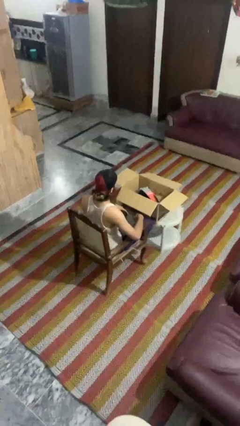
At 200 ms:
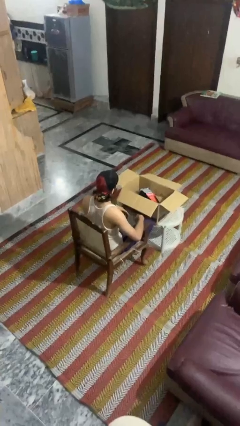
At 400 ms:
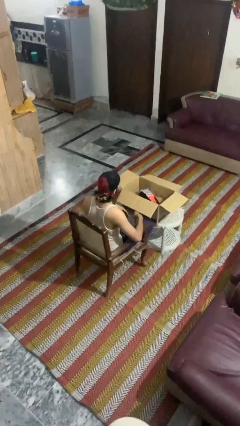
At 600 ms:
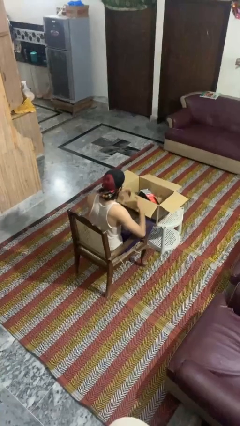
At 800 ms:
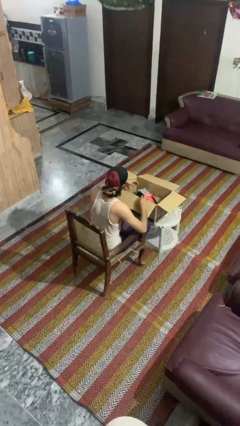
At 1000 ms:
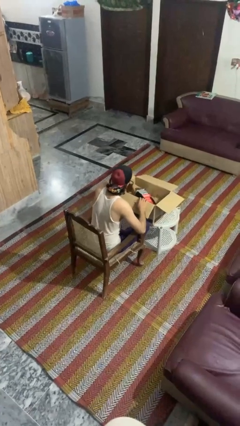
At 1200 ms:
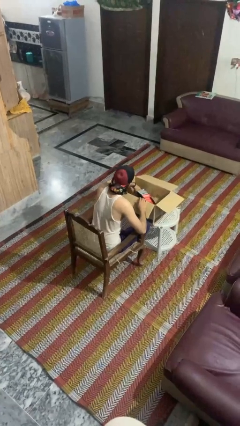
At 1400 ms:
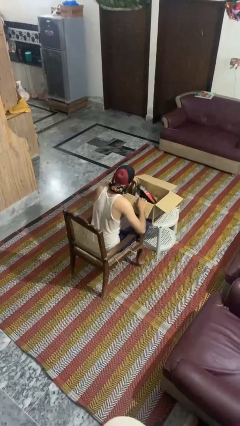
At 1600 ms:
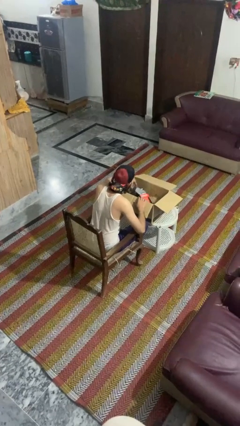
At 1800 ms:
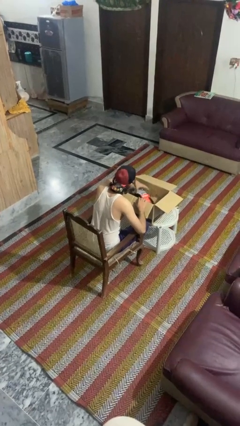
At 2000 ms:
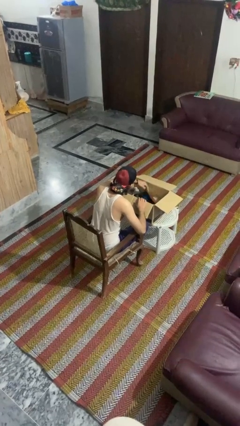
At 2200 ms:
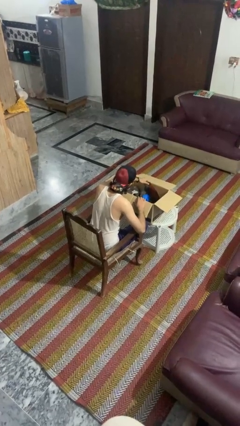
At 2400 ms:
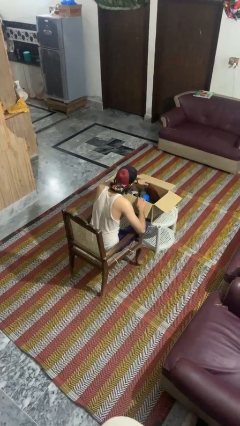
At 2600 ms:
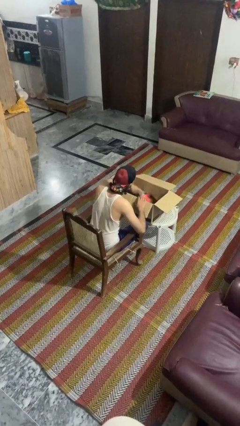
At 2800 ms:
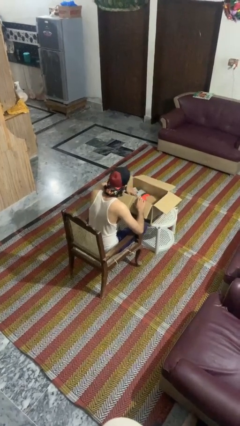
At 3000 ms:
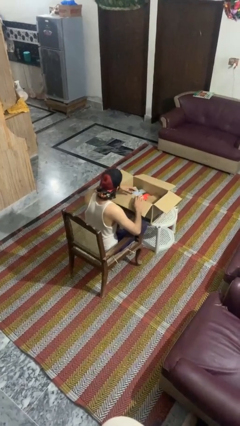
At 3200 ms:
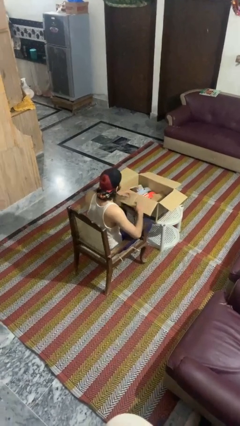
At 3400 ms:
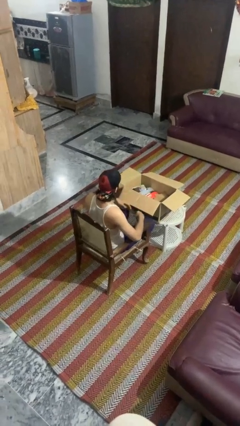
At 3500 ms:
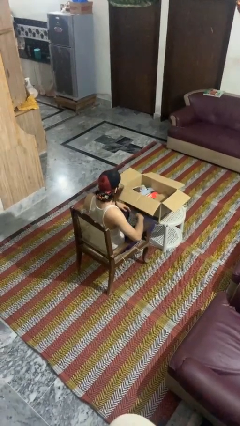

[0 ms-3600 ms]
person searches in box

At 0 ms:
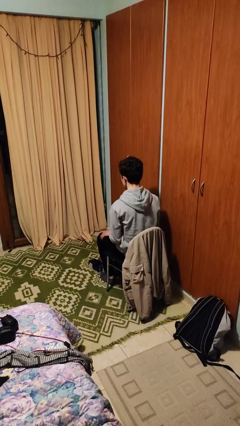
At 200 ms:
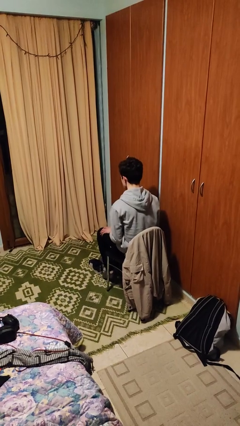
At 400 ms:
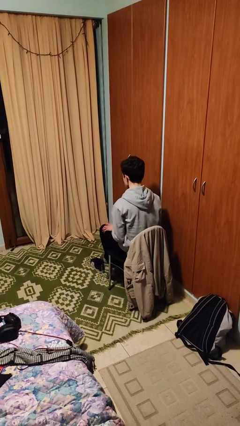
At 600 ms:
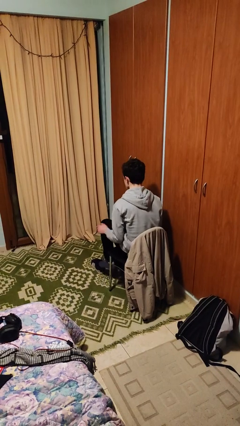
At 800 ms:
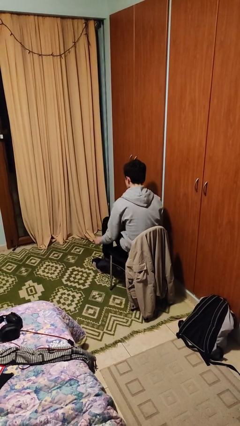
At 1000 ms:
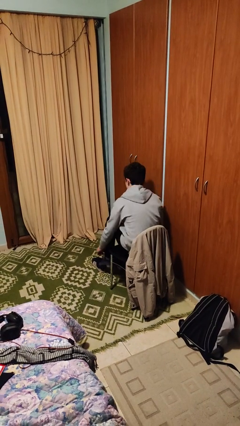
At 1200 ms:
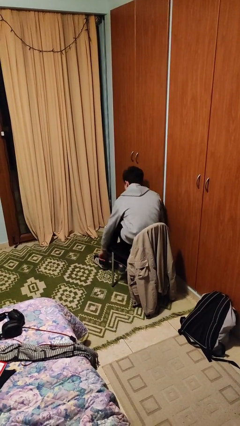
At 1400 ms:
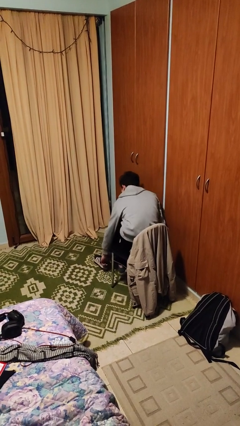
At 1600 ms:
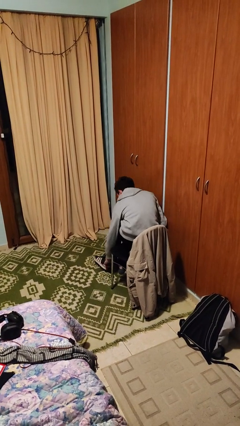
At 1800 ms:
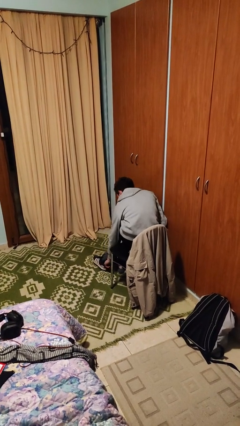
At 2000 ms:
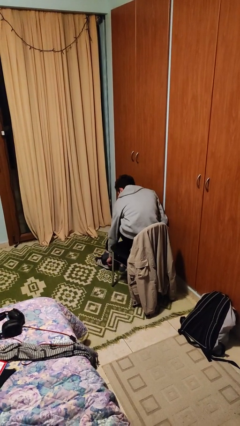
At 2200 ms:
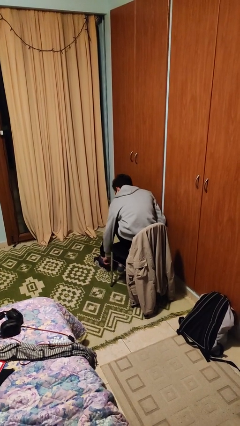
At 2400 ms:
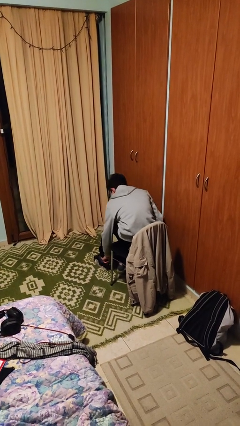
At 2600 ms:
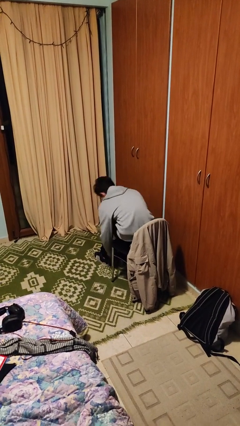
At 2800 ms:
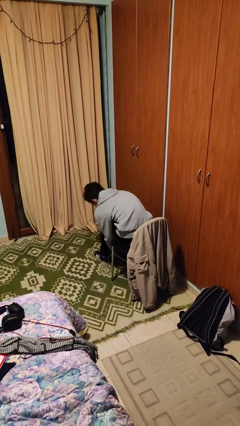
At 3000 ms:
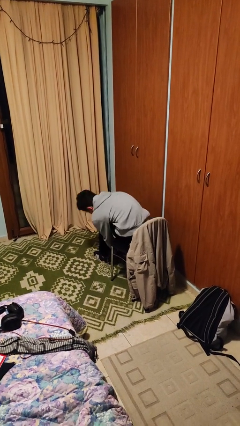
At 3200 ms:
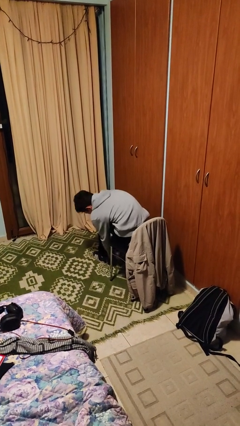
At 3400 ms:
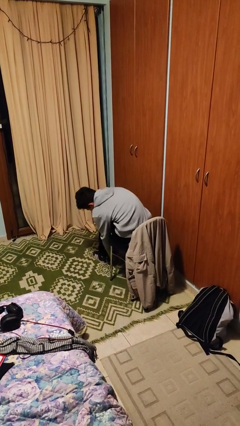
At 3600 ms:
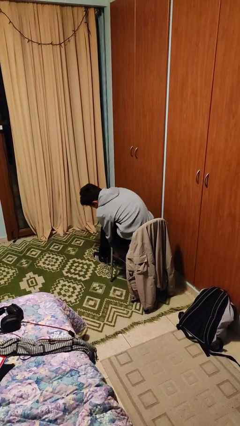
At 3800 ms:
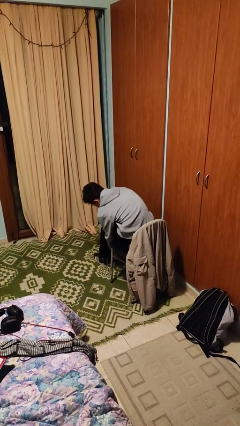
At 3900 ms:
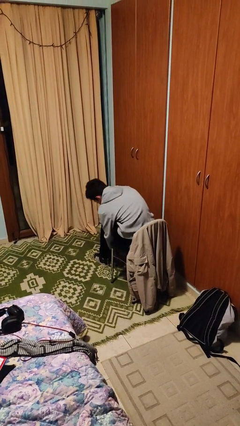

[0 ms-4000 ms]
person puts on shoes

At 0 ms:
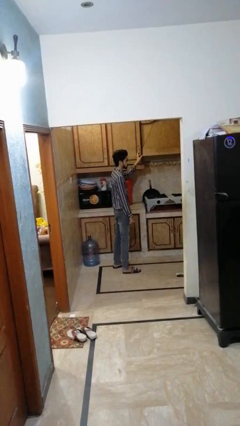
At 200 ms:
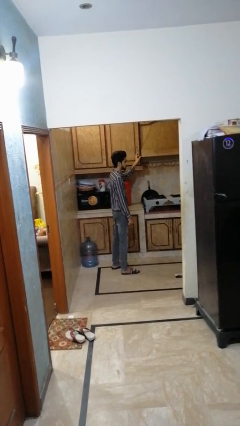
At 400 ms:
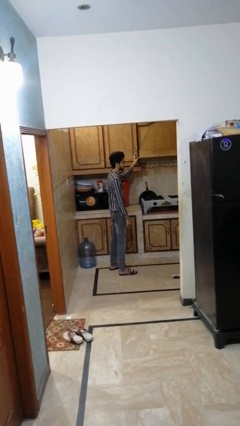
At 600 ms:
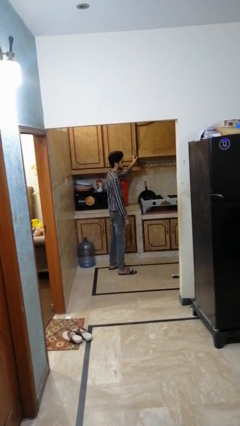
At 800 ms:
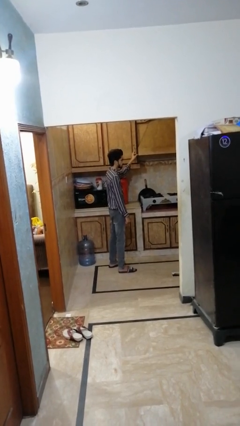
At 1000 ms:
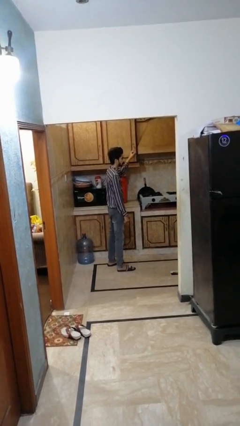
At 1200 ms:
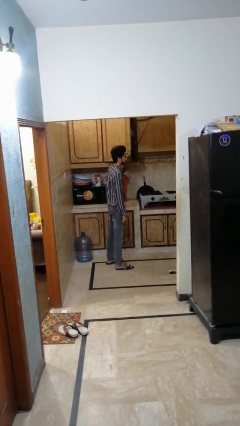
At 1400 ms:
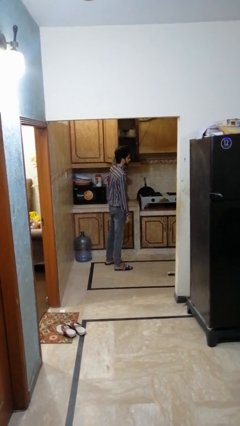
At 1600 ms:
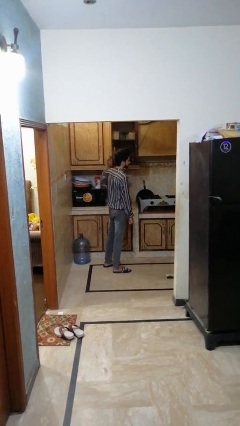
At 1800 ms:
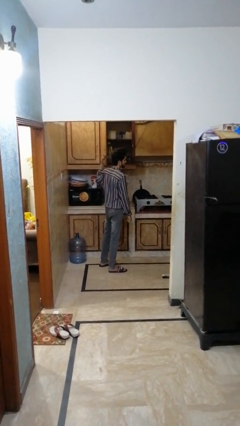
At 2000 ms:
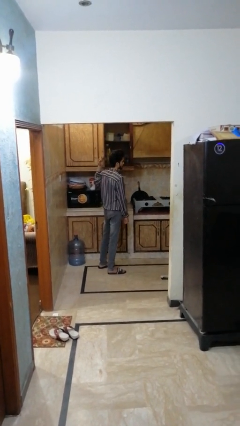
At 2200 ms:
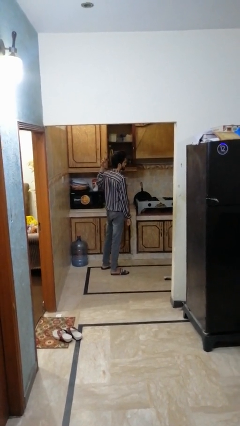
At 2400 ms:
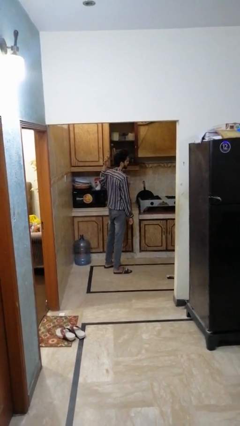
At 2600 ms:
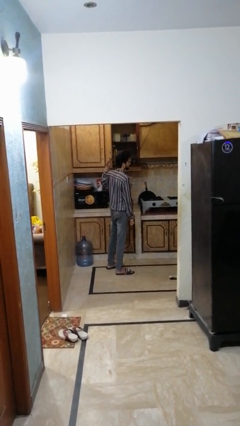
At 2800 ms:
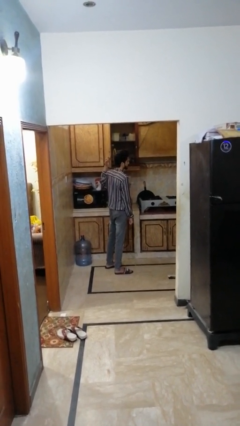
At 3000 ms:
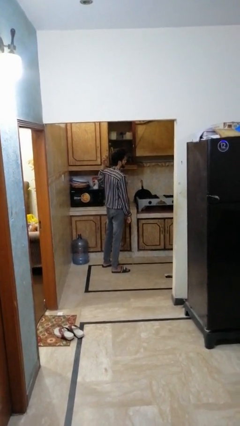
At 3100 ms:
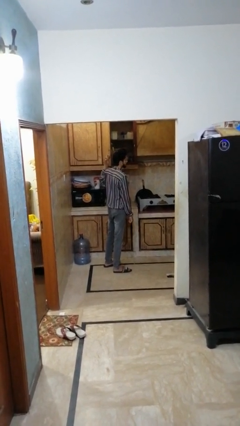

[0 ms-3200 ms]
person opens cabinet

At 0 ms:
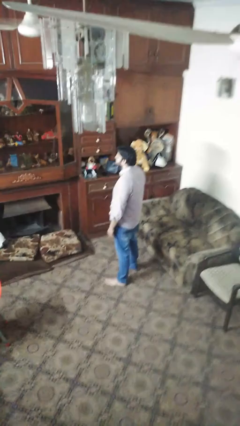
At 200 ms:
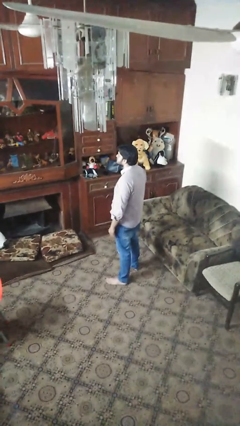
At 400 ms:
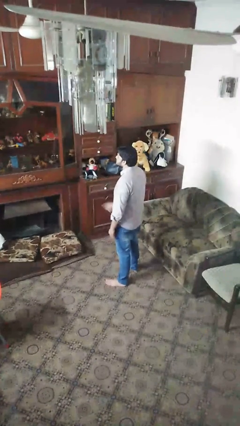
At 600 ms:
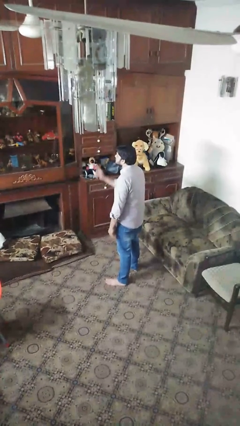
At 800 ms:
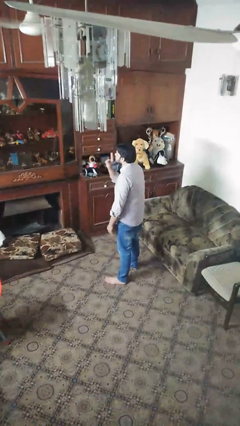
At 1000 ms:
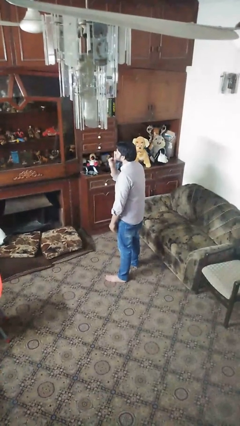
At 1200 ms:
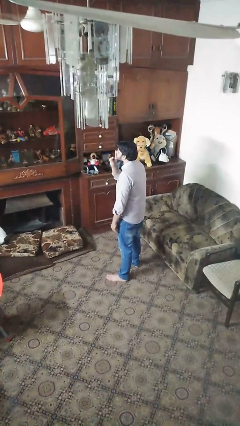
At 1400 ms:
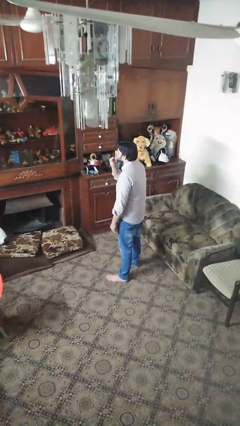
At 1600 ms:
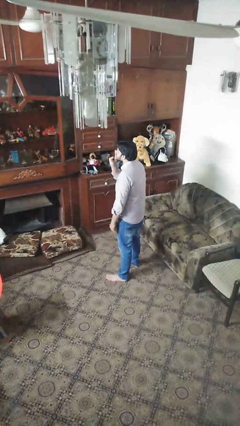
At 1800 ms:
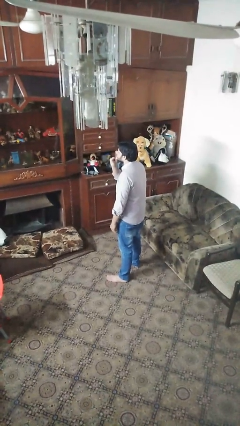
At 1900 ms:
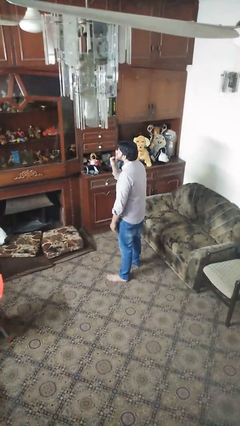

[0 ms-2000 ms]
person gestures be quiet

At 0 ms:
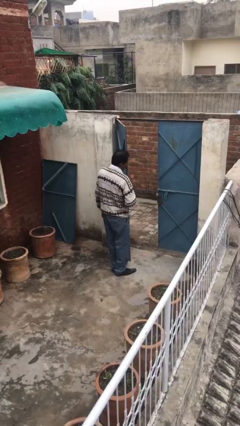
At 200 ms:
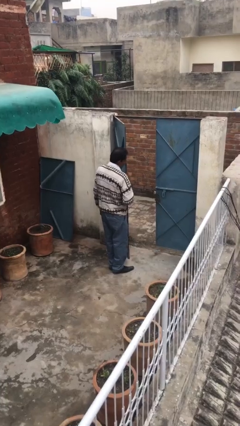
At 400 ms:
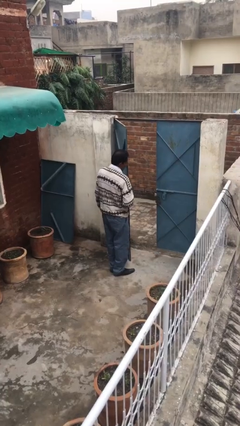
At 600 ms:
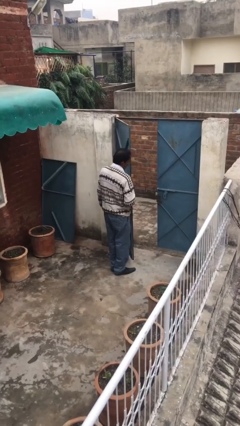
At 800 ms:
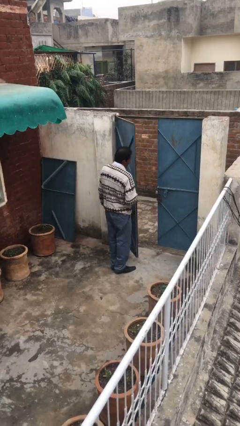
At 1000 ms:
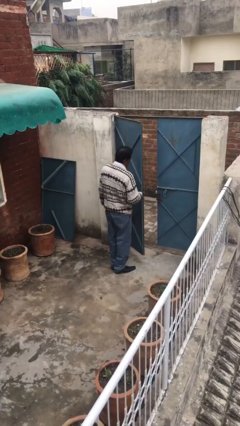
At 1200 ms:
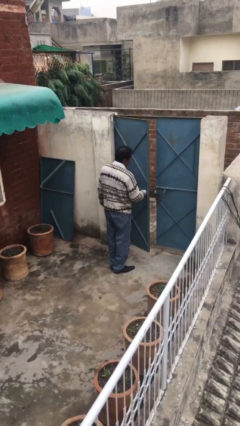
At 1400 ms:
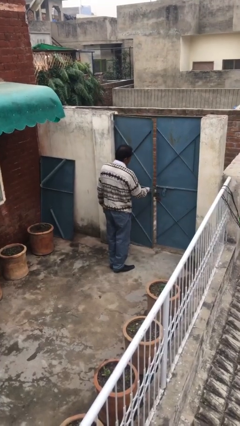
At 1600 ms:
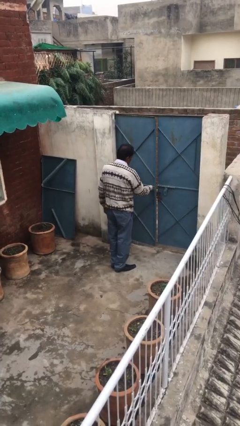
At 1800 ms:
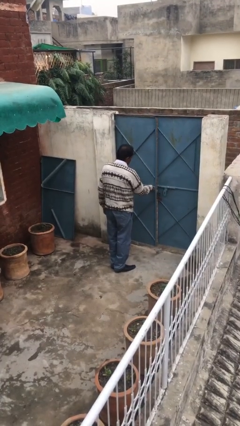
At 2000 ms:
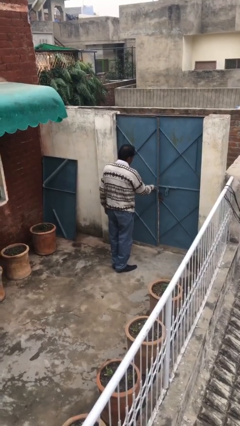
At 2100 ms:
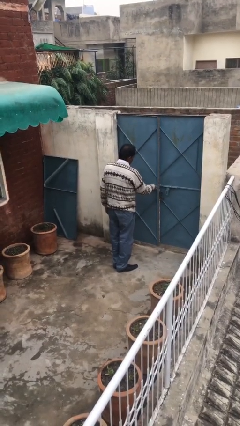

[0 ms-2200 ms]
person closes facility door

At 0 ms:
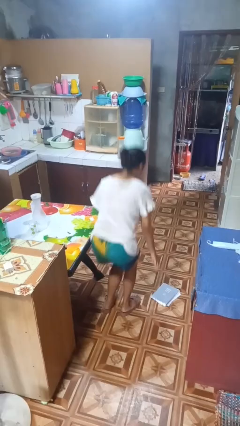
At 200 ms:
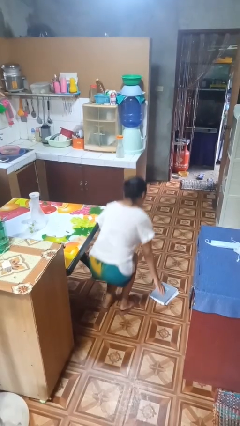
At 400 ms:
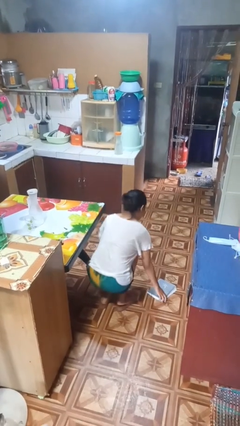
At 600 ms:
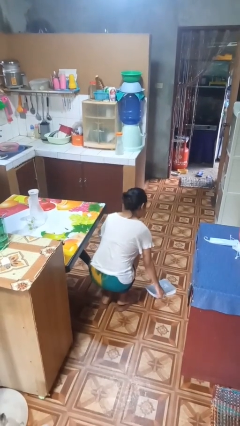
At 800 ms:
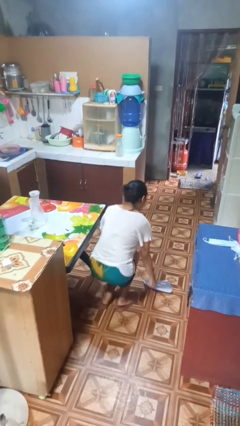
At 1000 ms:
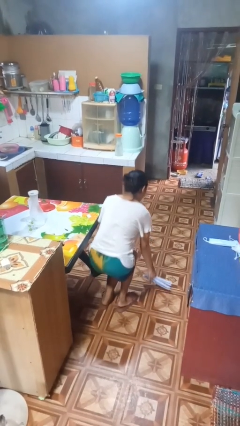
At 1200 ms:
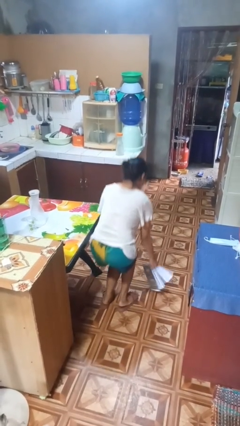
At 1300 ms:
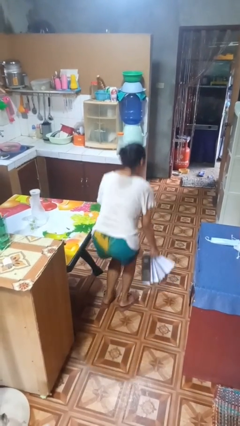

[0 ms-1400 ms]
person picks up object from floor

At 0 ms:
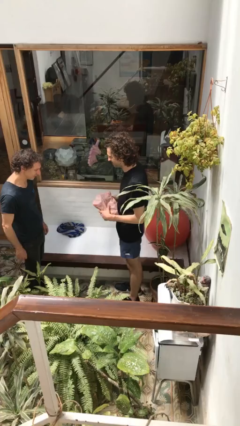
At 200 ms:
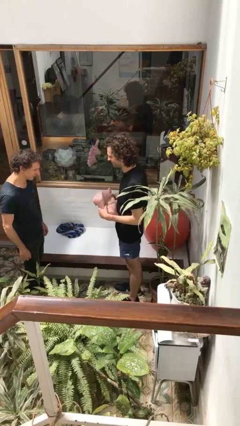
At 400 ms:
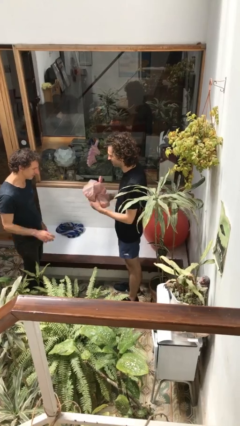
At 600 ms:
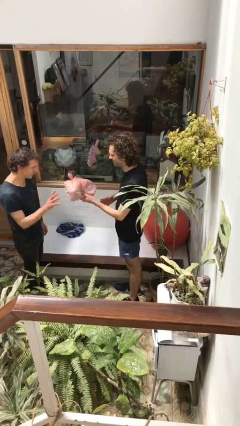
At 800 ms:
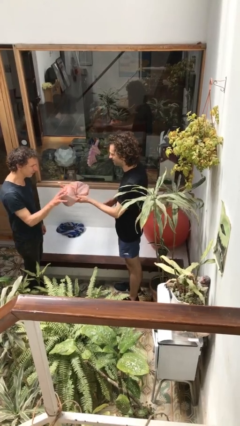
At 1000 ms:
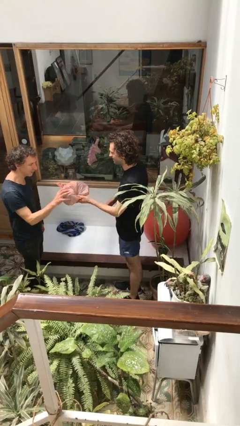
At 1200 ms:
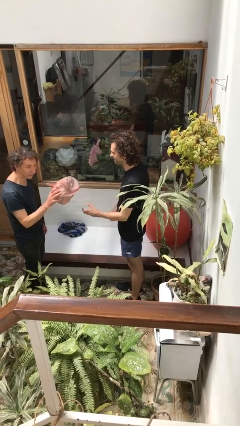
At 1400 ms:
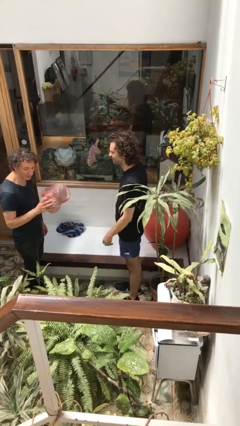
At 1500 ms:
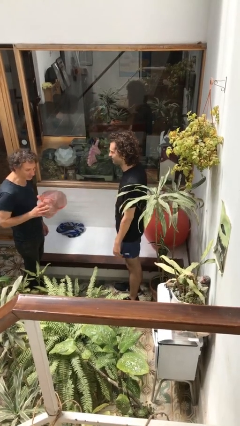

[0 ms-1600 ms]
person transfers object to person
